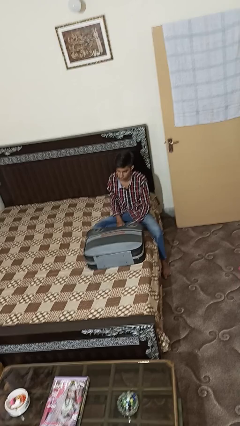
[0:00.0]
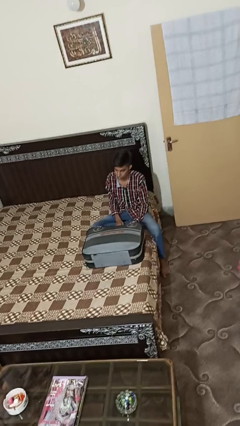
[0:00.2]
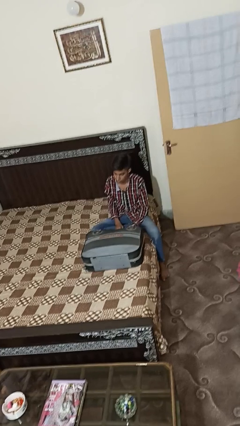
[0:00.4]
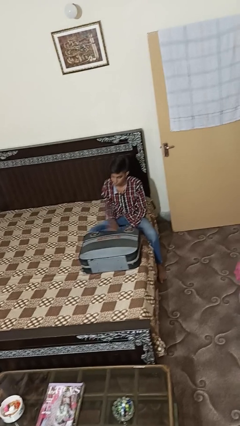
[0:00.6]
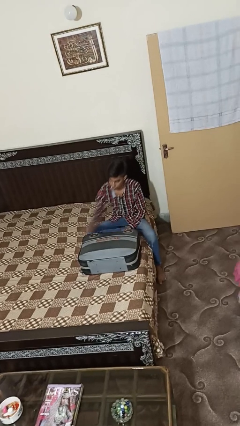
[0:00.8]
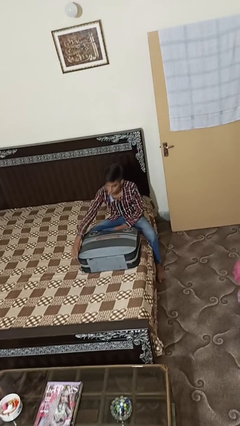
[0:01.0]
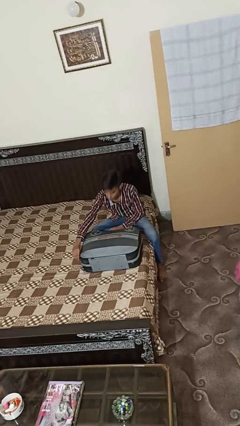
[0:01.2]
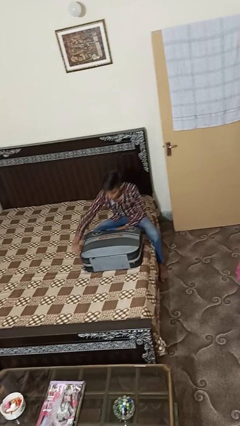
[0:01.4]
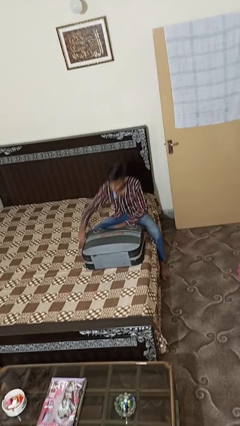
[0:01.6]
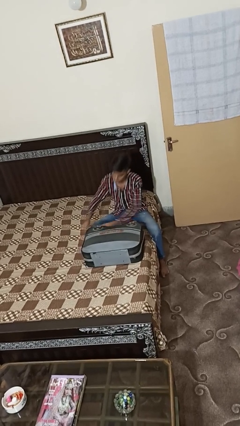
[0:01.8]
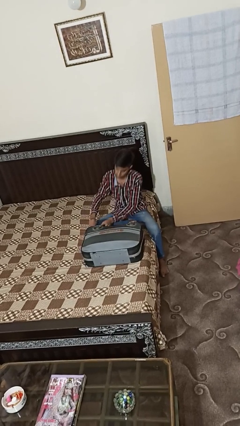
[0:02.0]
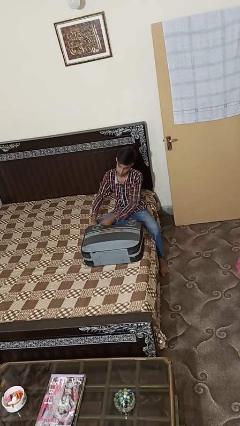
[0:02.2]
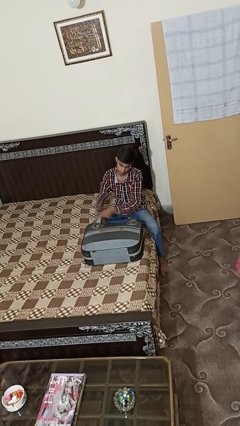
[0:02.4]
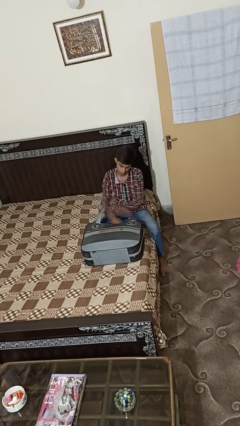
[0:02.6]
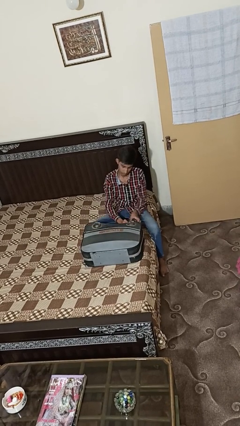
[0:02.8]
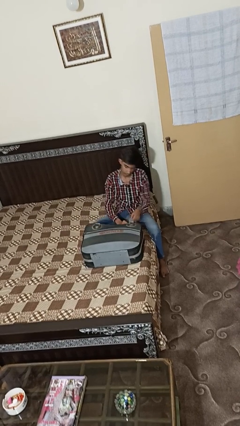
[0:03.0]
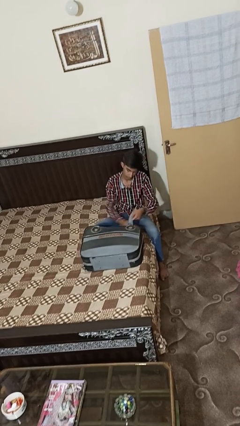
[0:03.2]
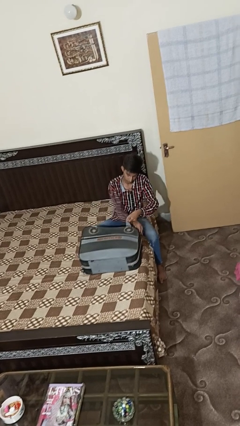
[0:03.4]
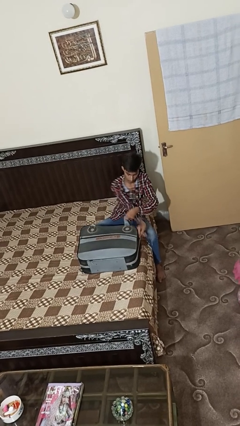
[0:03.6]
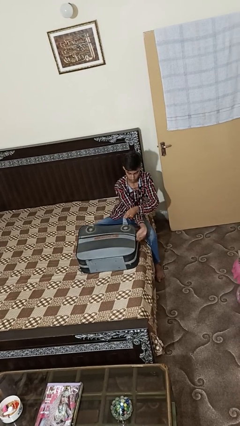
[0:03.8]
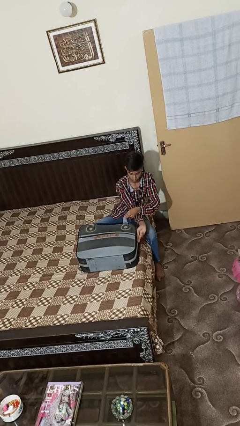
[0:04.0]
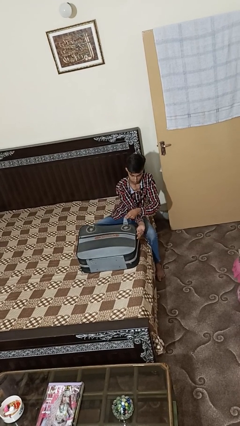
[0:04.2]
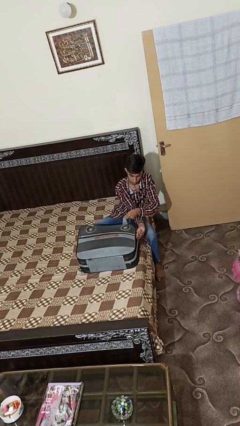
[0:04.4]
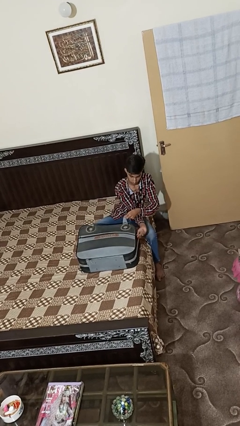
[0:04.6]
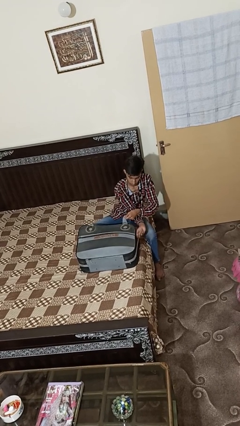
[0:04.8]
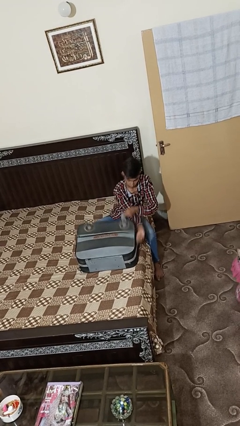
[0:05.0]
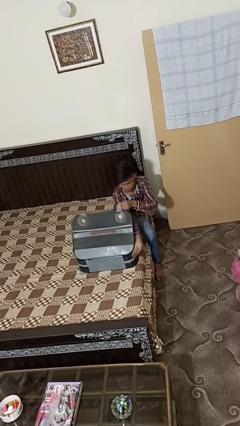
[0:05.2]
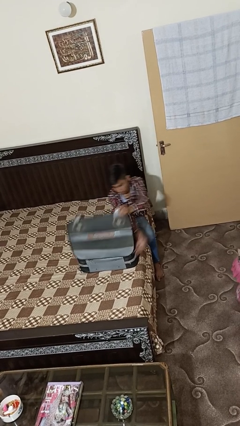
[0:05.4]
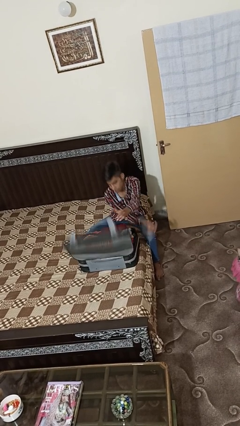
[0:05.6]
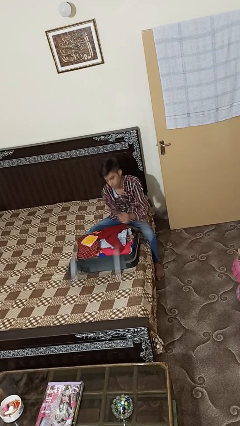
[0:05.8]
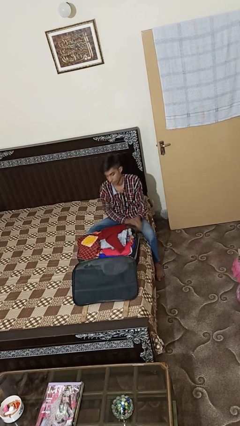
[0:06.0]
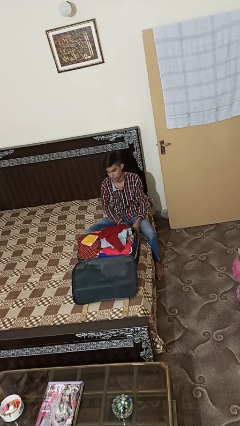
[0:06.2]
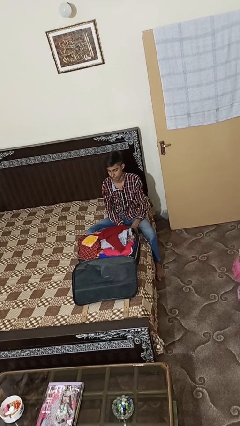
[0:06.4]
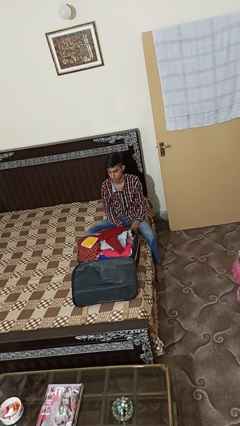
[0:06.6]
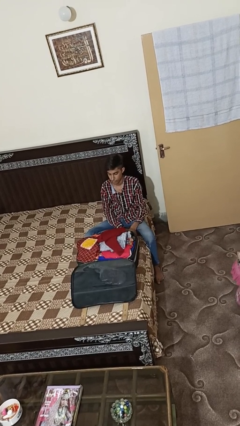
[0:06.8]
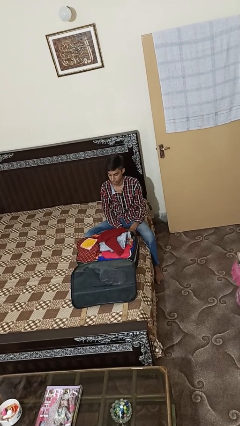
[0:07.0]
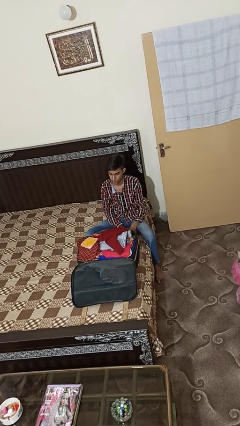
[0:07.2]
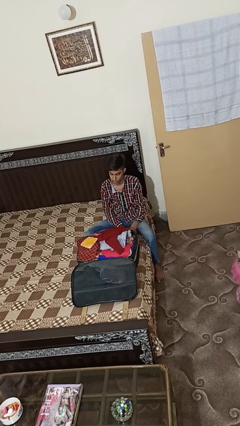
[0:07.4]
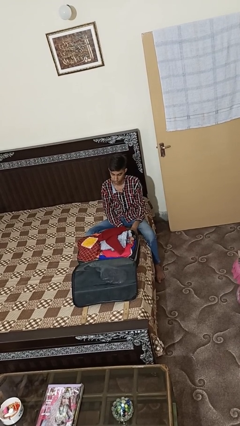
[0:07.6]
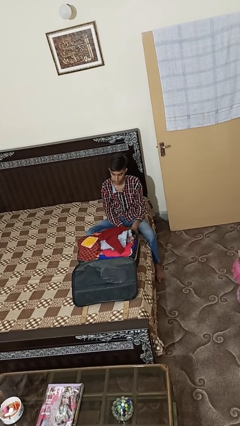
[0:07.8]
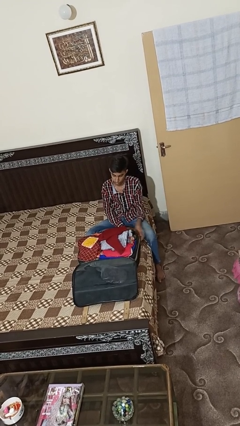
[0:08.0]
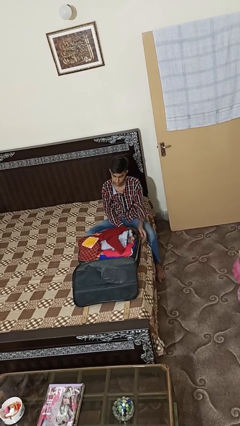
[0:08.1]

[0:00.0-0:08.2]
person opens suitcase

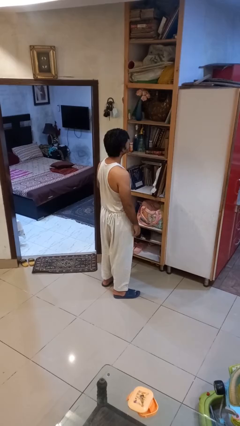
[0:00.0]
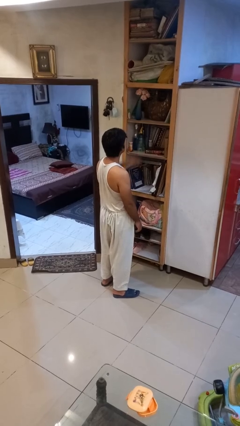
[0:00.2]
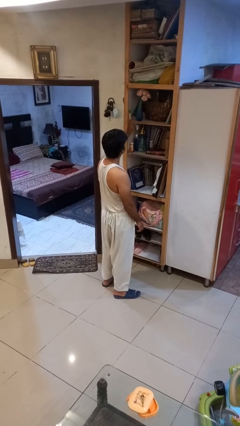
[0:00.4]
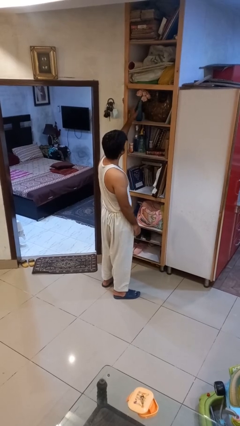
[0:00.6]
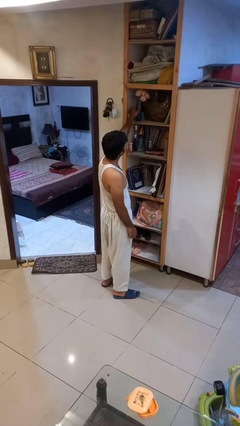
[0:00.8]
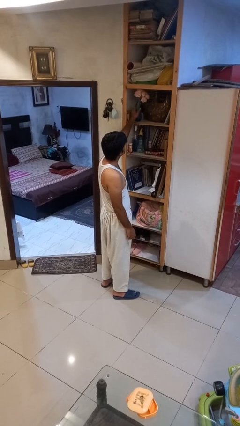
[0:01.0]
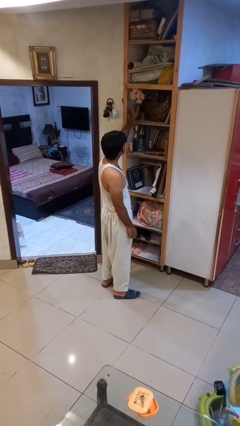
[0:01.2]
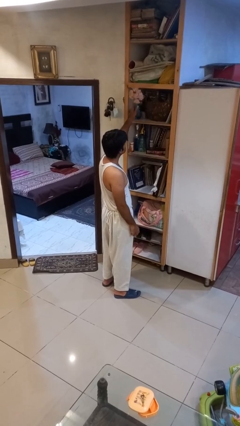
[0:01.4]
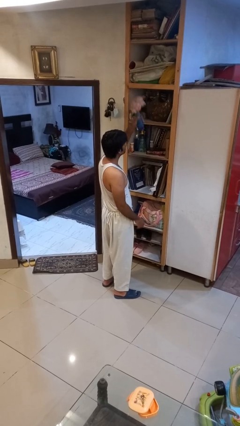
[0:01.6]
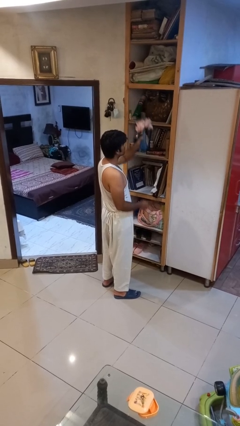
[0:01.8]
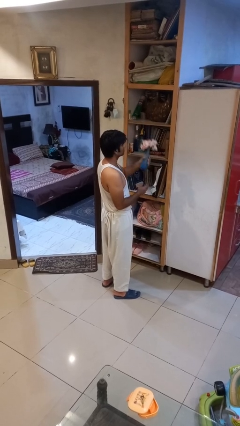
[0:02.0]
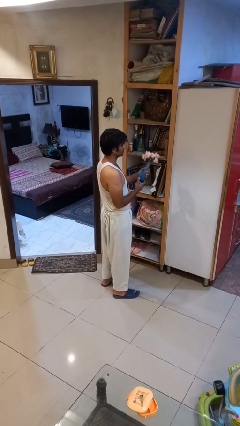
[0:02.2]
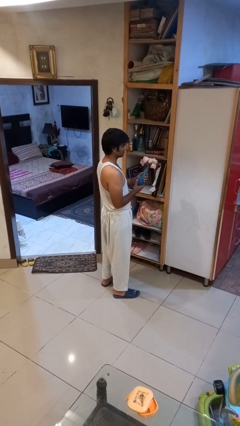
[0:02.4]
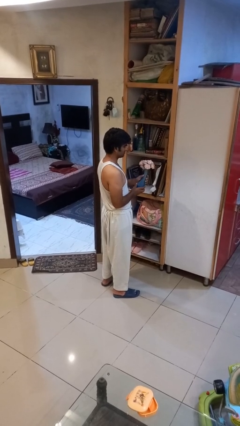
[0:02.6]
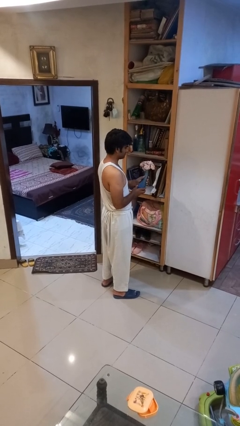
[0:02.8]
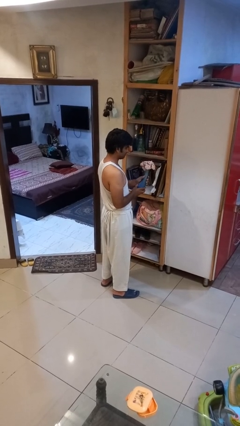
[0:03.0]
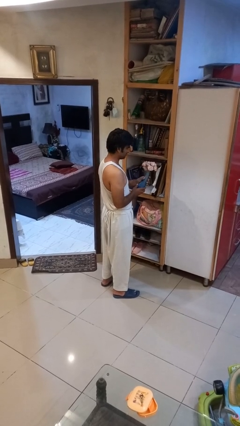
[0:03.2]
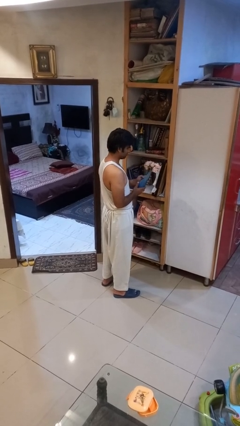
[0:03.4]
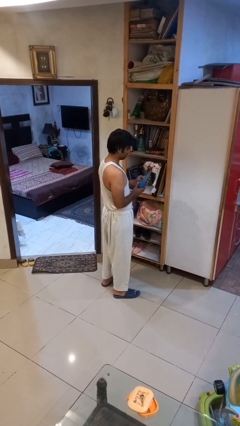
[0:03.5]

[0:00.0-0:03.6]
person picks up object from shelf

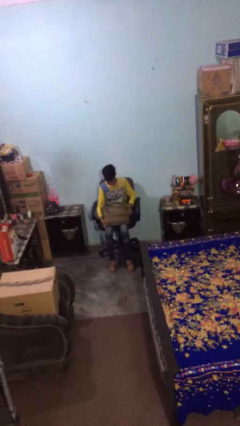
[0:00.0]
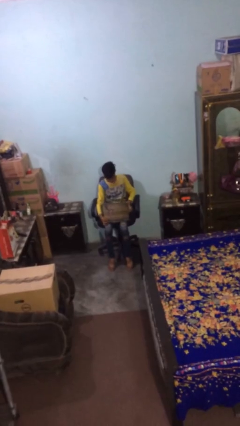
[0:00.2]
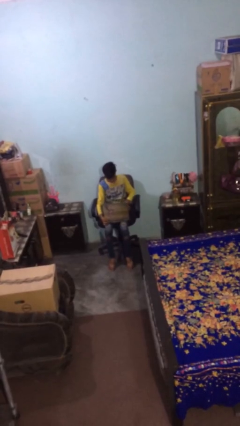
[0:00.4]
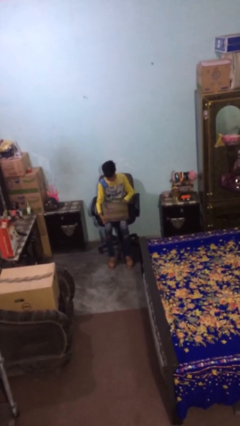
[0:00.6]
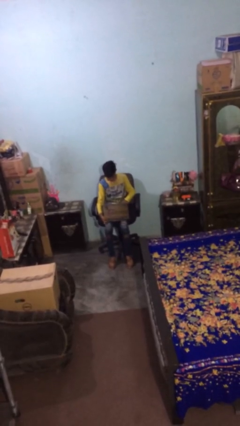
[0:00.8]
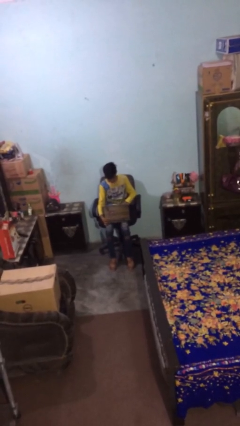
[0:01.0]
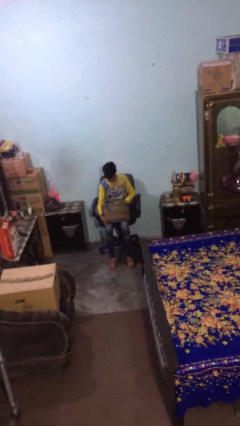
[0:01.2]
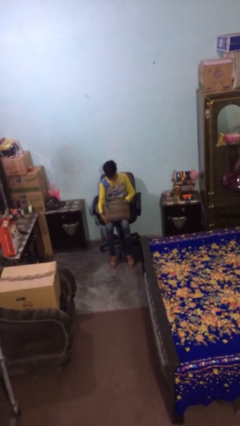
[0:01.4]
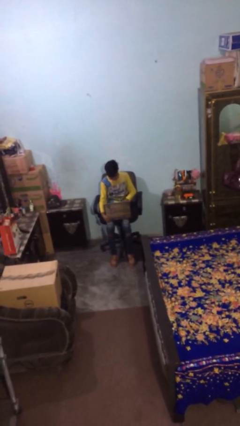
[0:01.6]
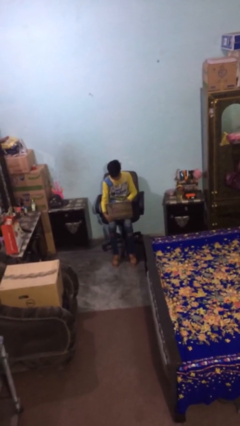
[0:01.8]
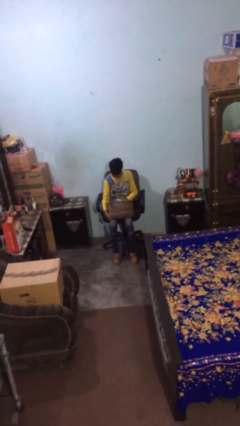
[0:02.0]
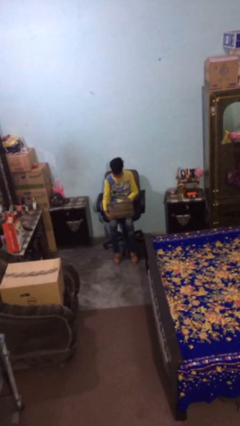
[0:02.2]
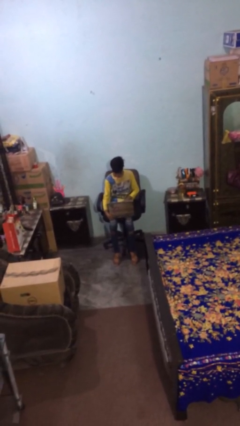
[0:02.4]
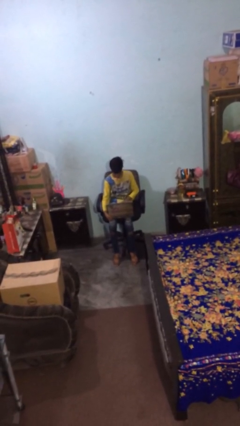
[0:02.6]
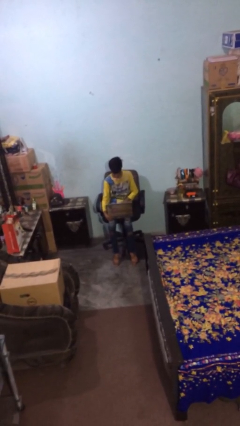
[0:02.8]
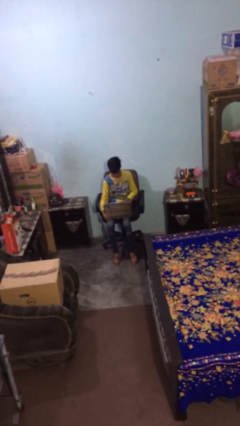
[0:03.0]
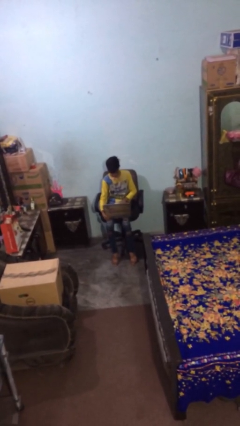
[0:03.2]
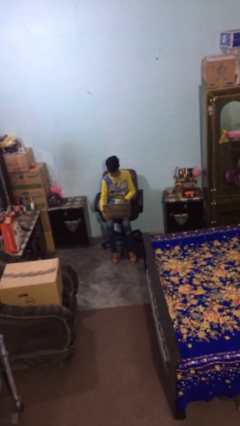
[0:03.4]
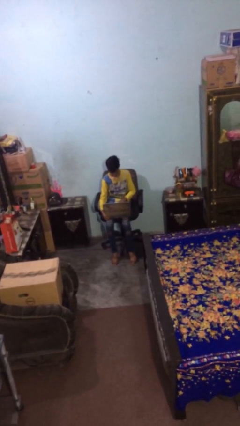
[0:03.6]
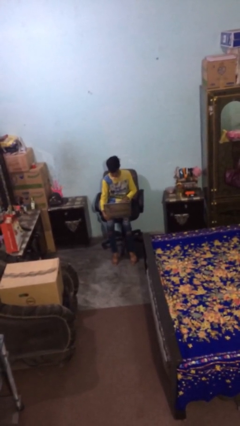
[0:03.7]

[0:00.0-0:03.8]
person interacts with laptop

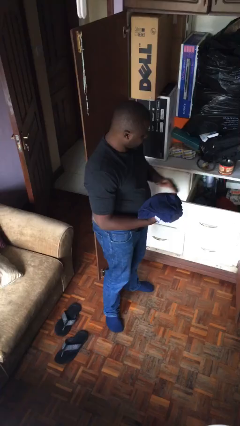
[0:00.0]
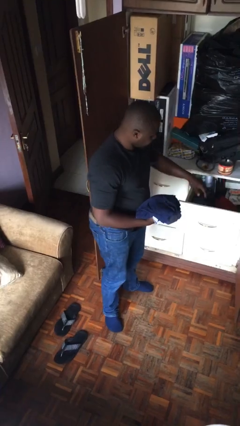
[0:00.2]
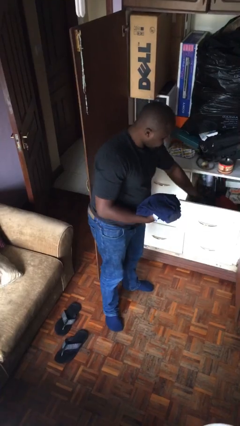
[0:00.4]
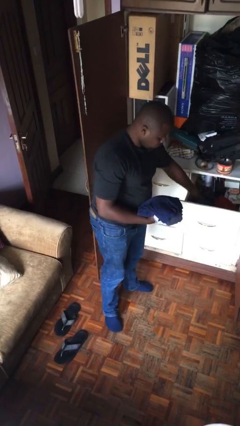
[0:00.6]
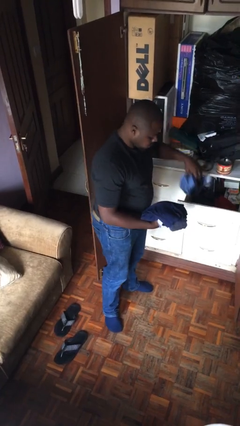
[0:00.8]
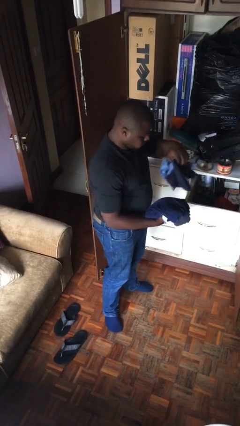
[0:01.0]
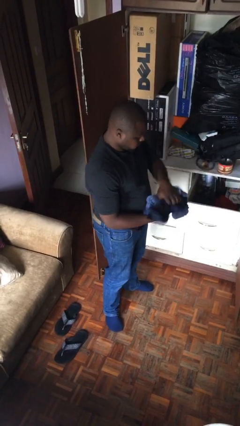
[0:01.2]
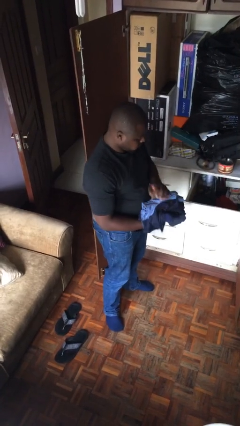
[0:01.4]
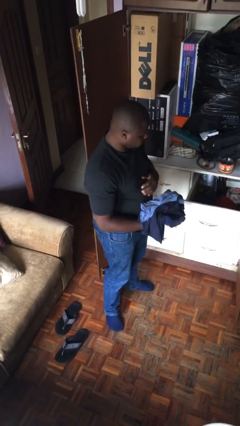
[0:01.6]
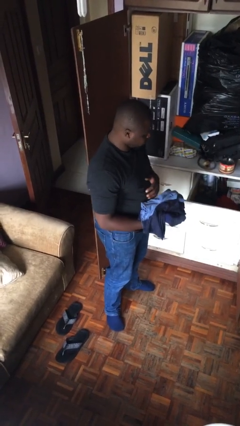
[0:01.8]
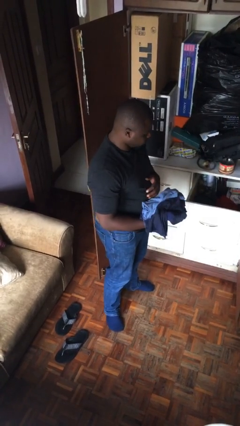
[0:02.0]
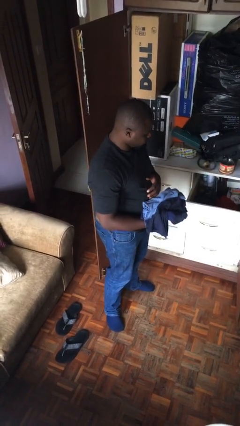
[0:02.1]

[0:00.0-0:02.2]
person takes clothes from dresser
